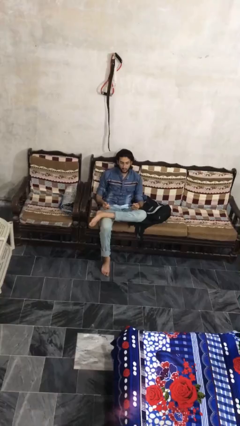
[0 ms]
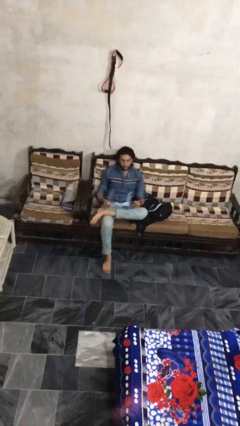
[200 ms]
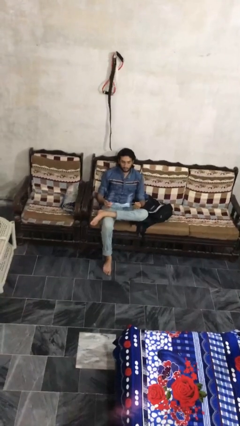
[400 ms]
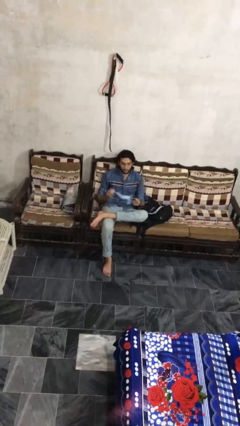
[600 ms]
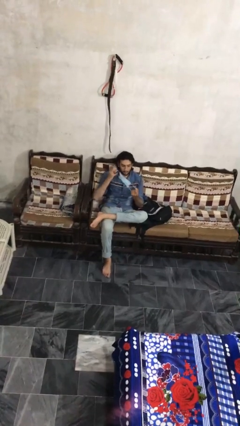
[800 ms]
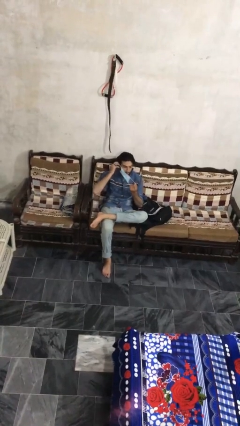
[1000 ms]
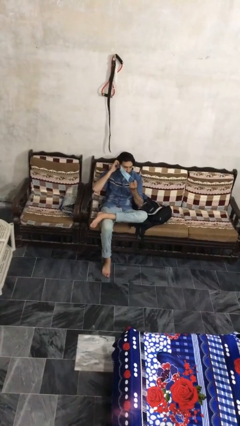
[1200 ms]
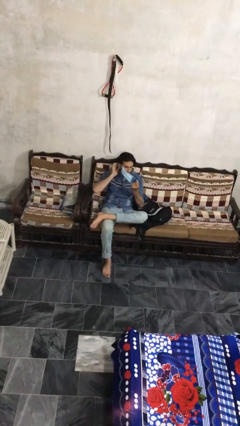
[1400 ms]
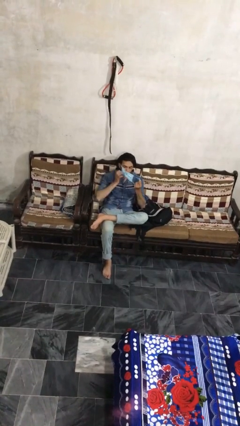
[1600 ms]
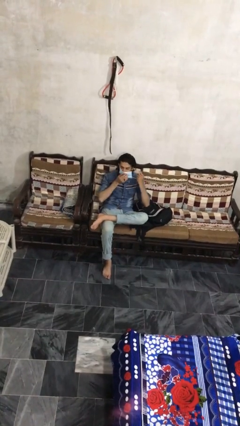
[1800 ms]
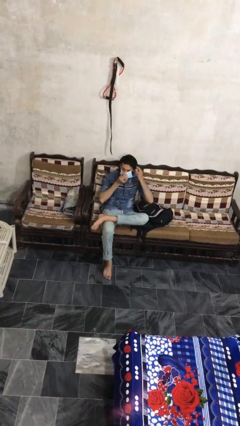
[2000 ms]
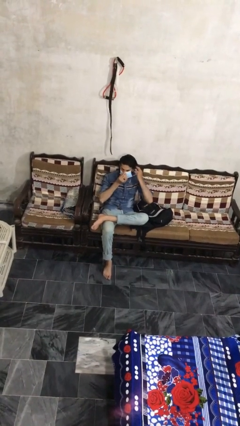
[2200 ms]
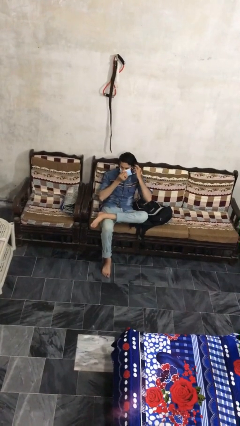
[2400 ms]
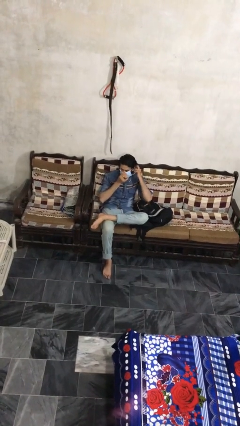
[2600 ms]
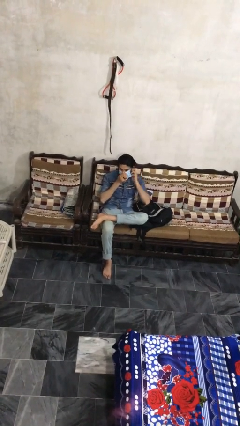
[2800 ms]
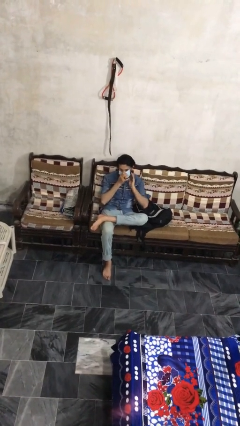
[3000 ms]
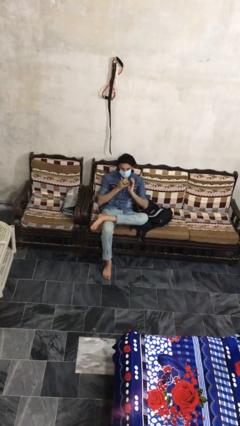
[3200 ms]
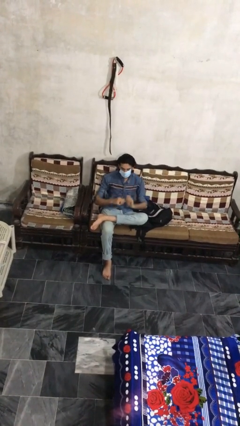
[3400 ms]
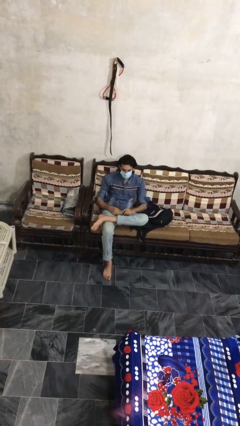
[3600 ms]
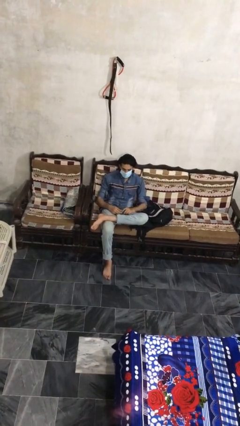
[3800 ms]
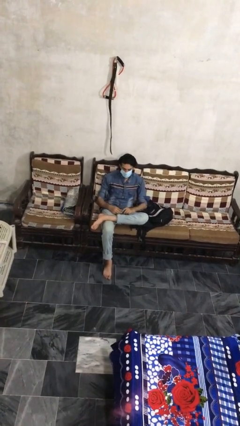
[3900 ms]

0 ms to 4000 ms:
person puts on facemask

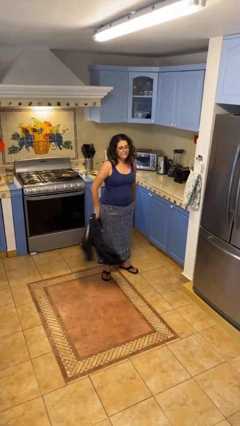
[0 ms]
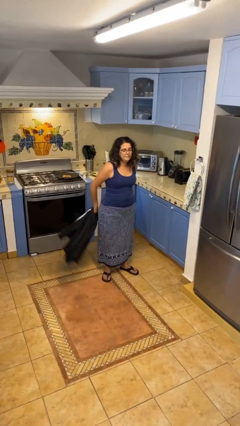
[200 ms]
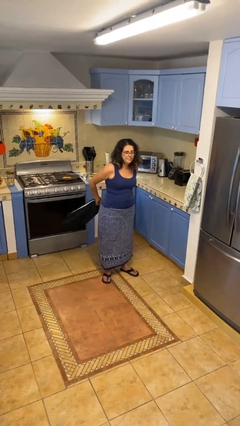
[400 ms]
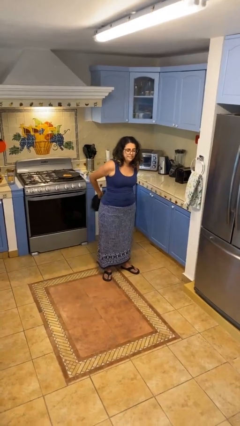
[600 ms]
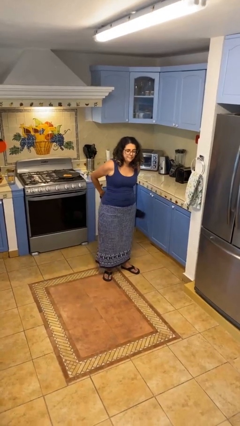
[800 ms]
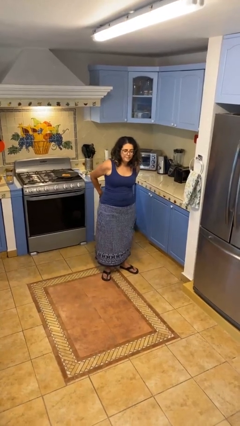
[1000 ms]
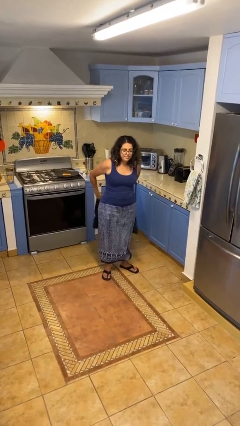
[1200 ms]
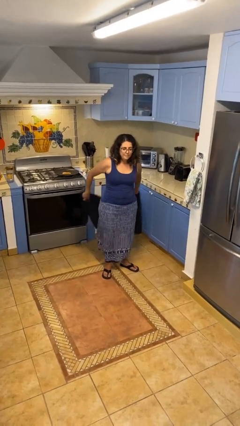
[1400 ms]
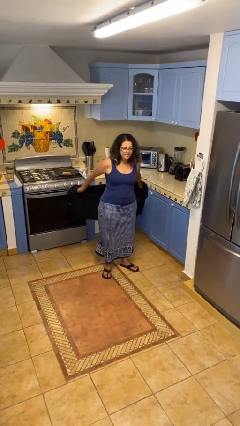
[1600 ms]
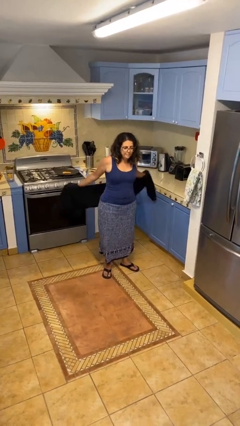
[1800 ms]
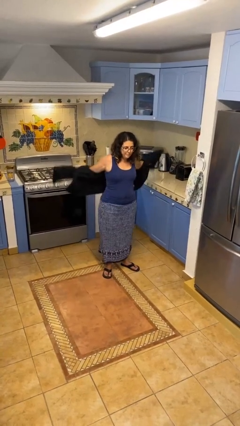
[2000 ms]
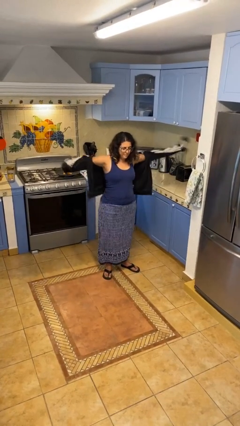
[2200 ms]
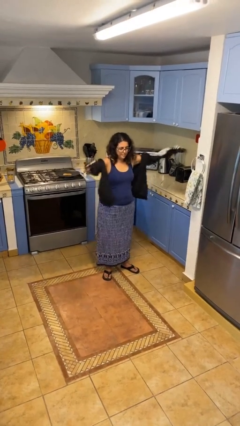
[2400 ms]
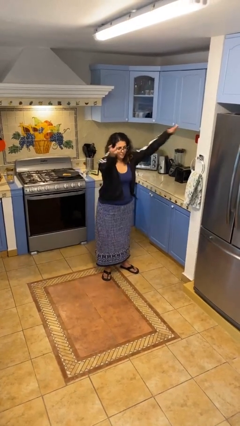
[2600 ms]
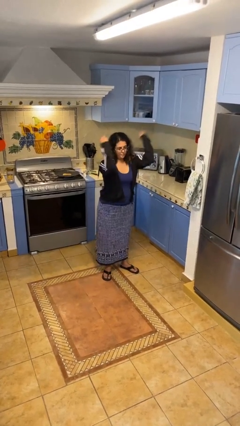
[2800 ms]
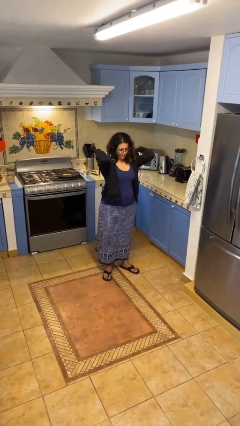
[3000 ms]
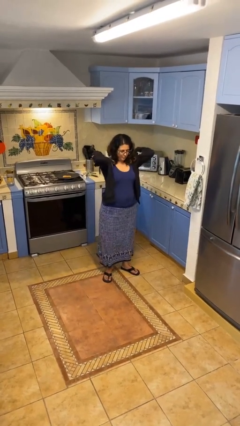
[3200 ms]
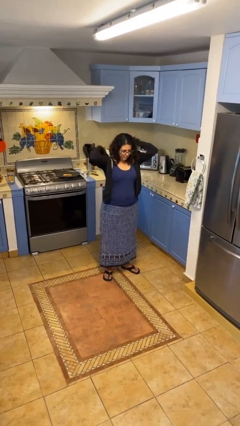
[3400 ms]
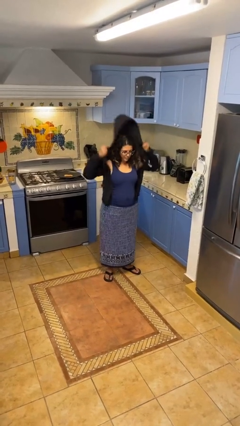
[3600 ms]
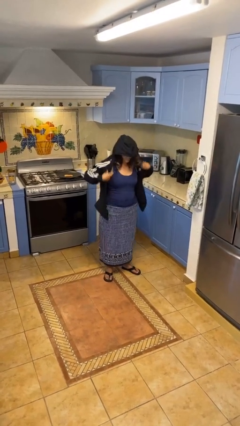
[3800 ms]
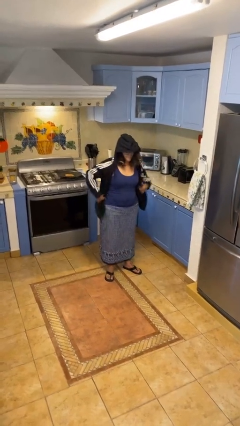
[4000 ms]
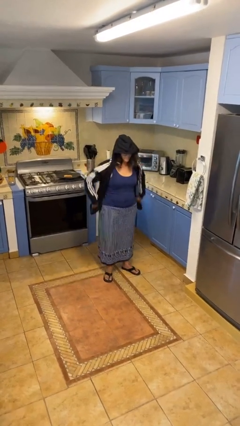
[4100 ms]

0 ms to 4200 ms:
person puts on hoodie

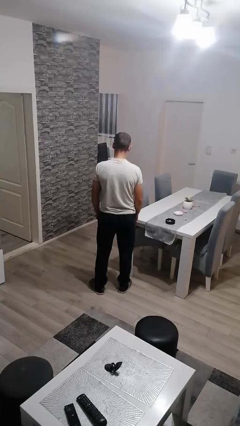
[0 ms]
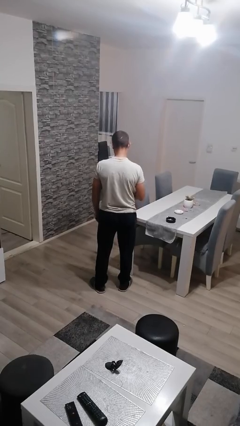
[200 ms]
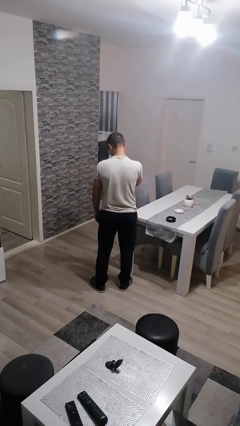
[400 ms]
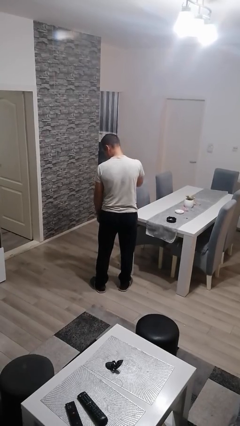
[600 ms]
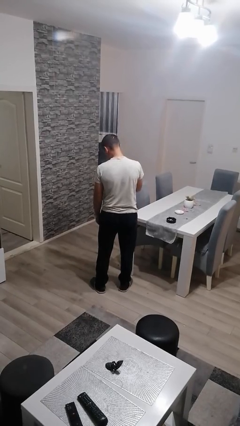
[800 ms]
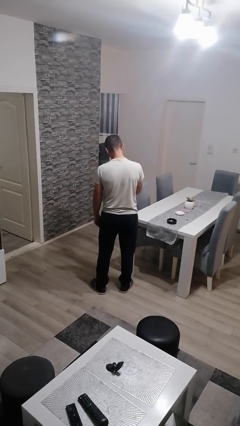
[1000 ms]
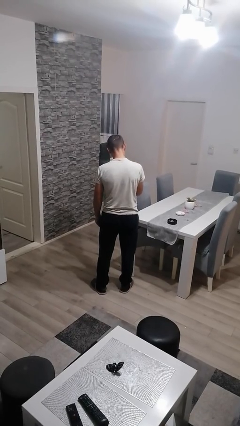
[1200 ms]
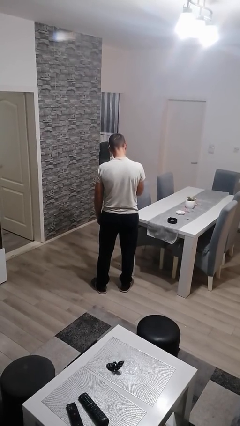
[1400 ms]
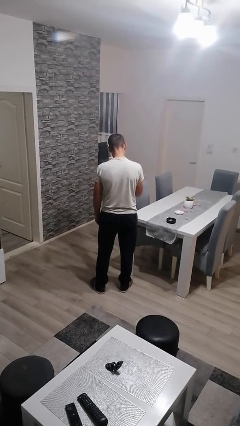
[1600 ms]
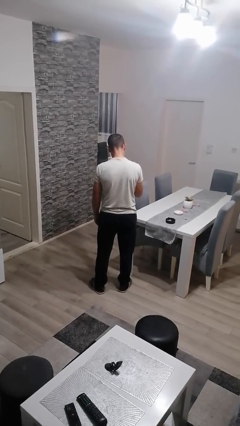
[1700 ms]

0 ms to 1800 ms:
person swats bug

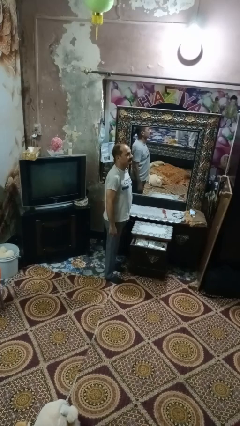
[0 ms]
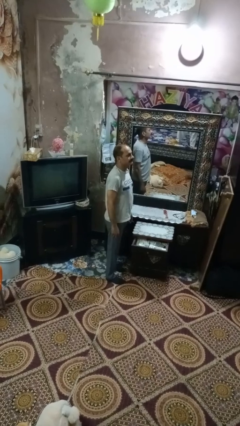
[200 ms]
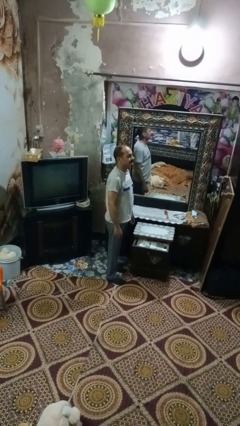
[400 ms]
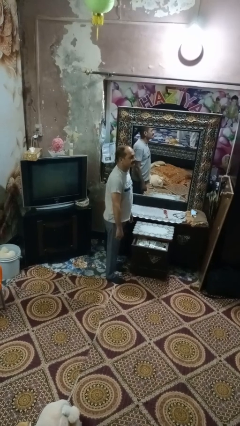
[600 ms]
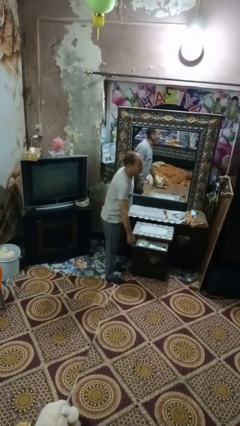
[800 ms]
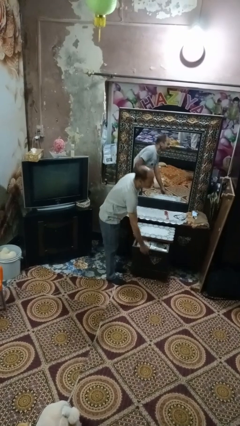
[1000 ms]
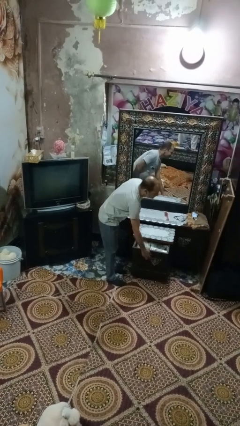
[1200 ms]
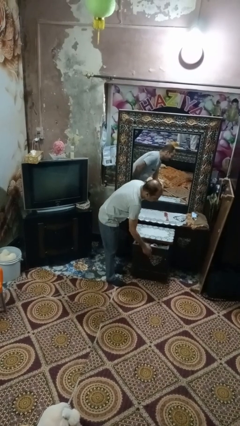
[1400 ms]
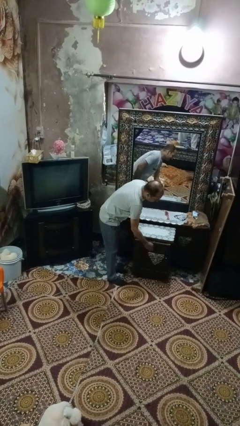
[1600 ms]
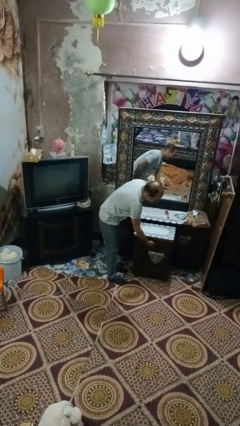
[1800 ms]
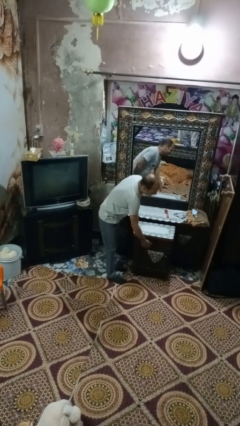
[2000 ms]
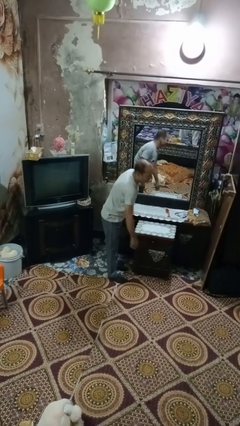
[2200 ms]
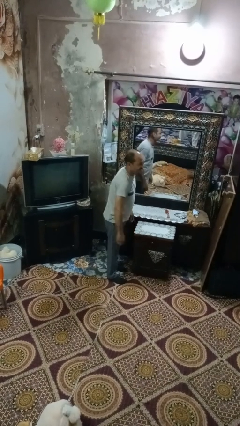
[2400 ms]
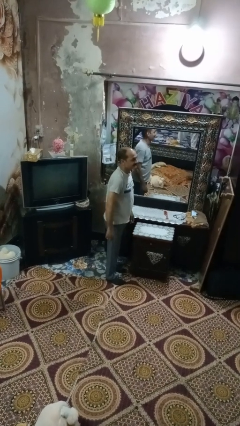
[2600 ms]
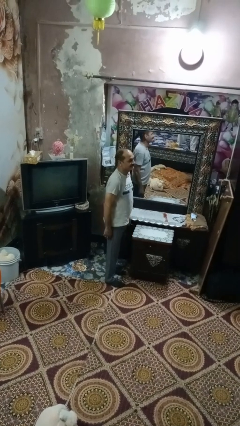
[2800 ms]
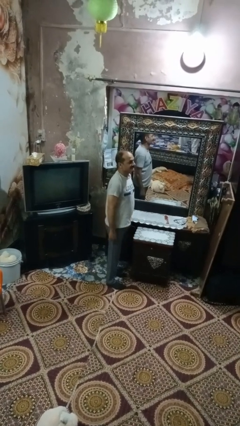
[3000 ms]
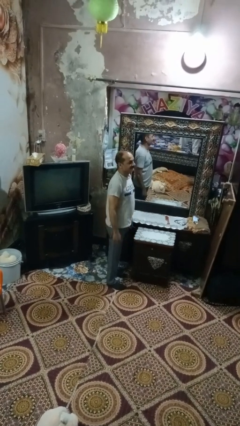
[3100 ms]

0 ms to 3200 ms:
person closes dresser drawer

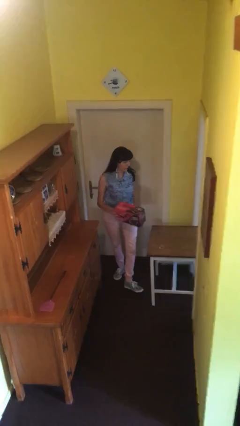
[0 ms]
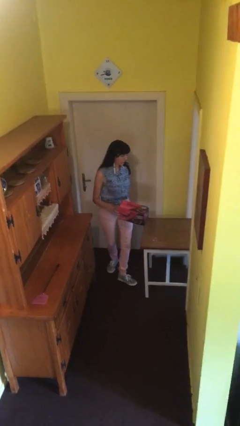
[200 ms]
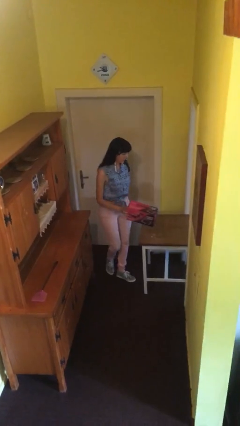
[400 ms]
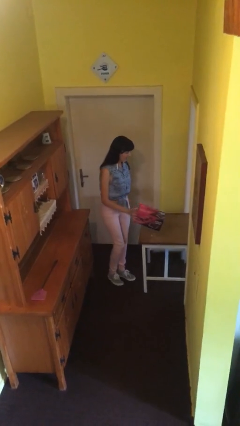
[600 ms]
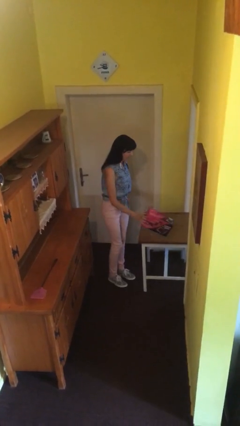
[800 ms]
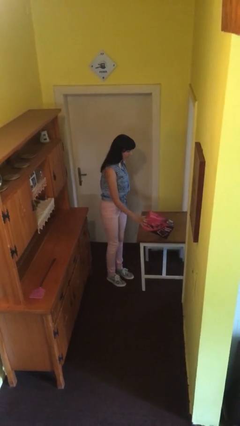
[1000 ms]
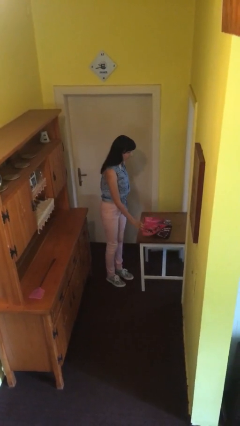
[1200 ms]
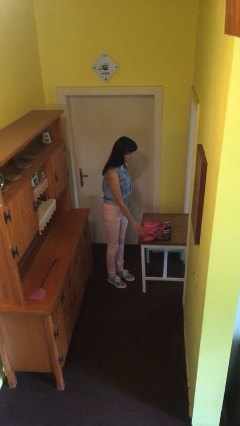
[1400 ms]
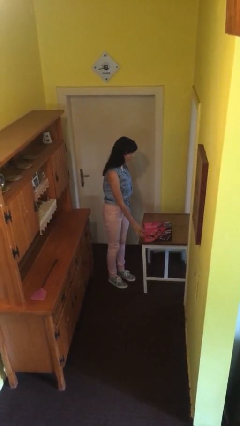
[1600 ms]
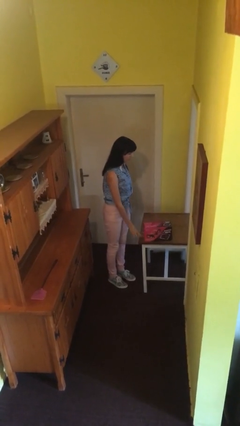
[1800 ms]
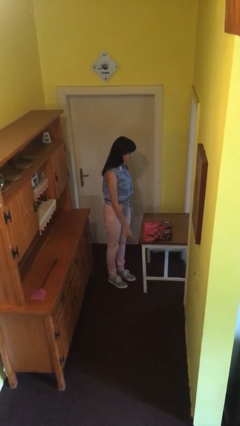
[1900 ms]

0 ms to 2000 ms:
person puts down object on table

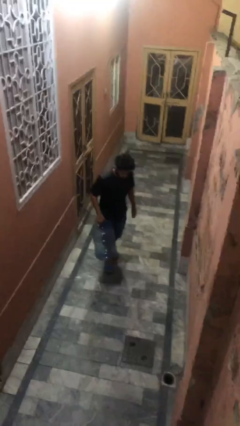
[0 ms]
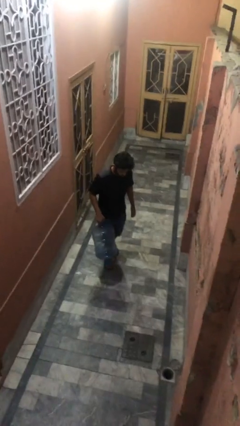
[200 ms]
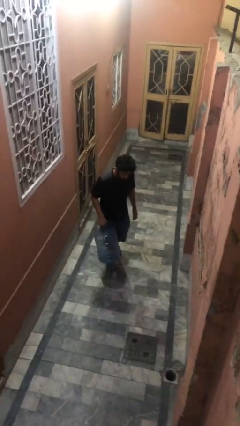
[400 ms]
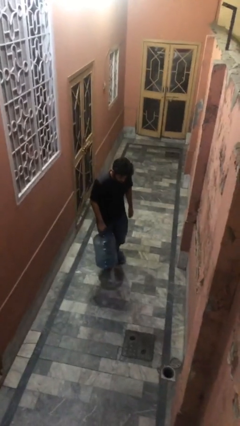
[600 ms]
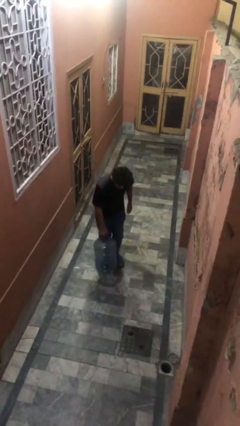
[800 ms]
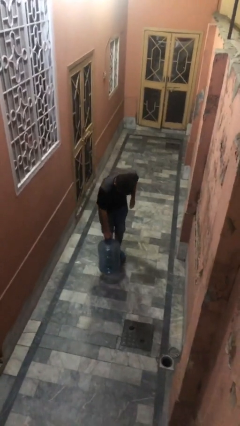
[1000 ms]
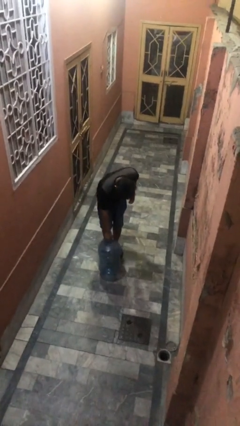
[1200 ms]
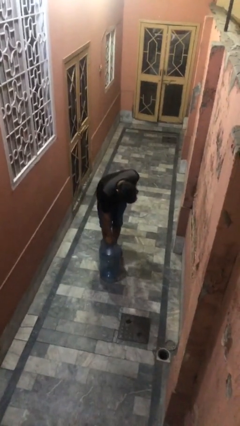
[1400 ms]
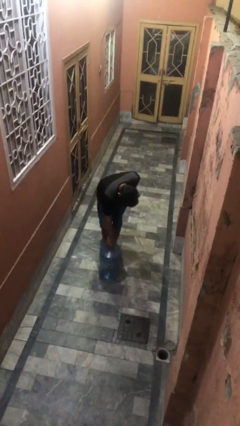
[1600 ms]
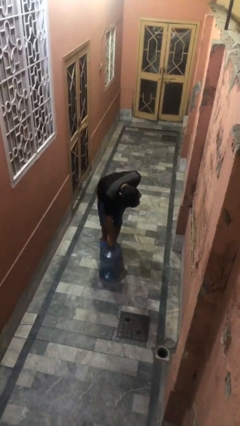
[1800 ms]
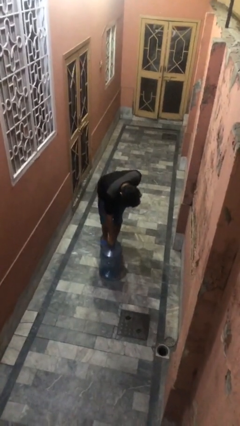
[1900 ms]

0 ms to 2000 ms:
person puts down object on floor

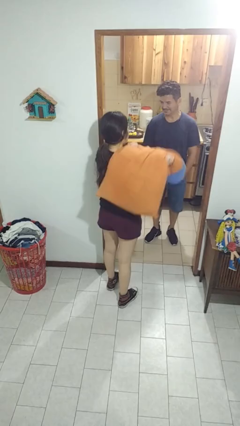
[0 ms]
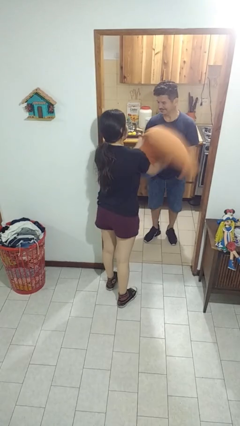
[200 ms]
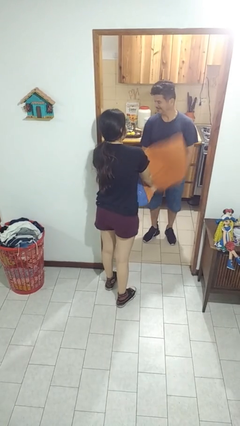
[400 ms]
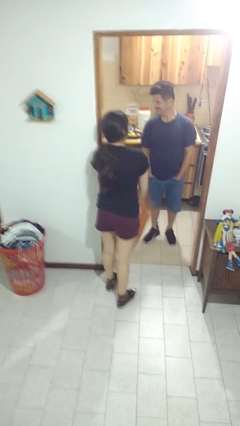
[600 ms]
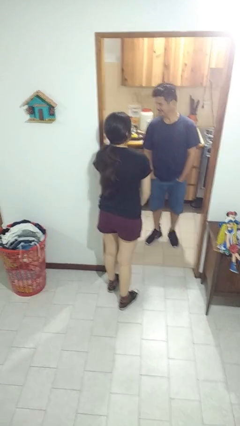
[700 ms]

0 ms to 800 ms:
person hits person with pillow
